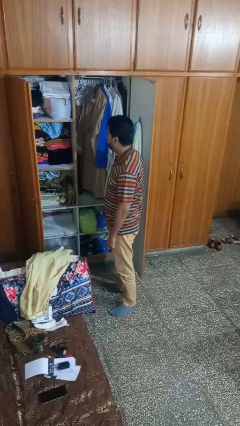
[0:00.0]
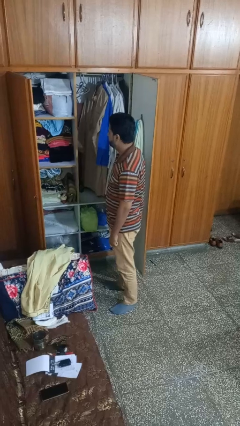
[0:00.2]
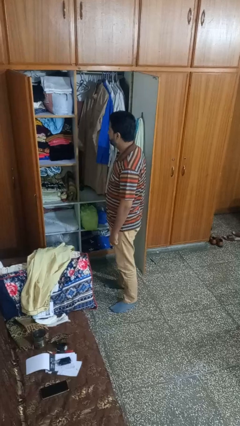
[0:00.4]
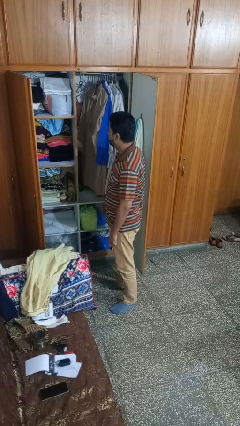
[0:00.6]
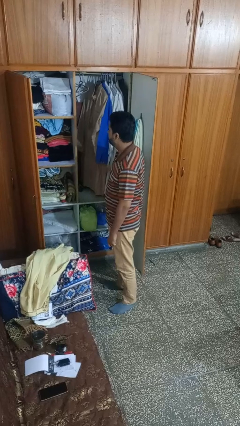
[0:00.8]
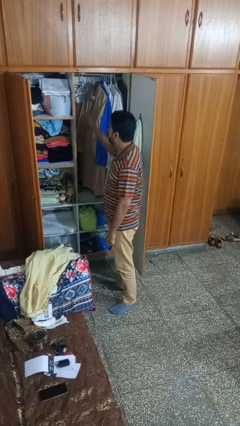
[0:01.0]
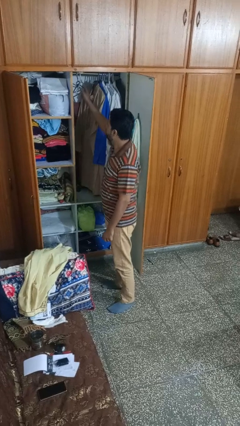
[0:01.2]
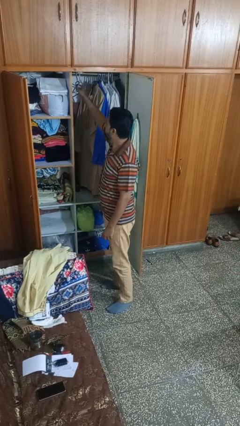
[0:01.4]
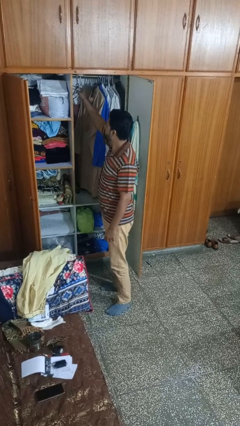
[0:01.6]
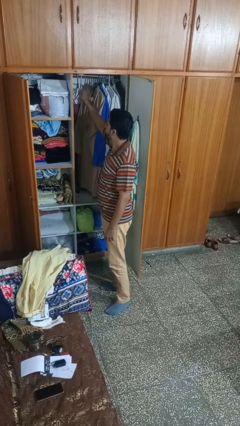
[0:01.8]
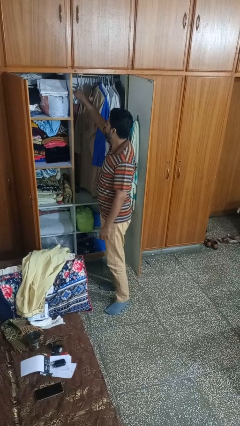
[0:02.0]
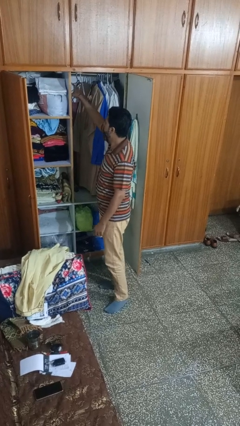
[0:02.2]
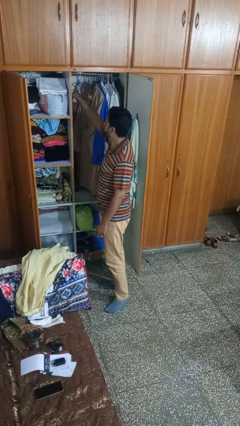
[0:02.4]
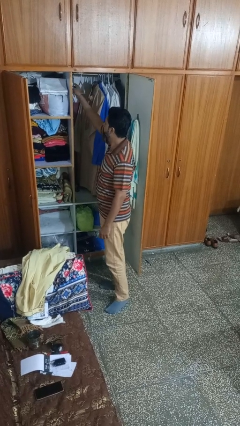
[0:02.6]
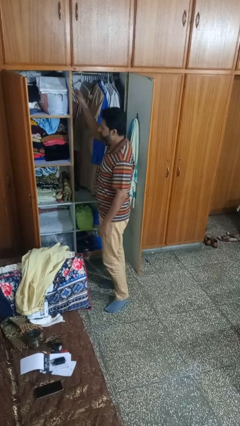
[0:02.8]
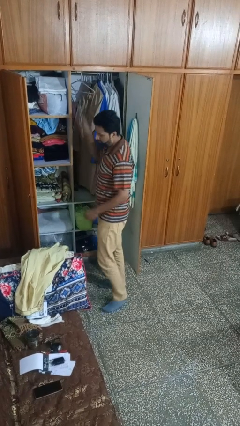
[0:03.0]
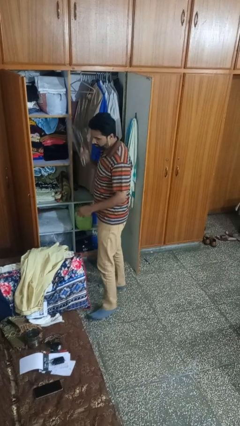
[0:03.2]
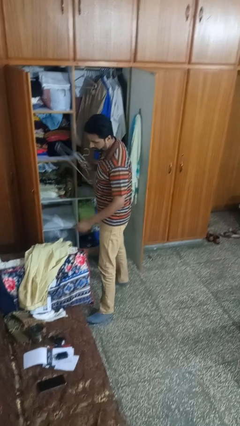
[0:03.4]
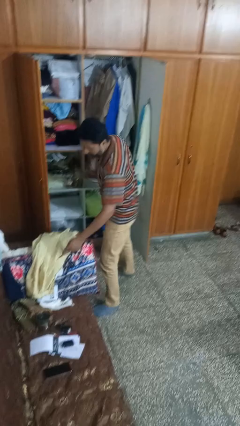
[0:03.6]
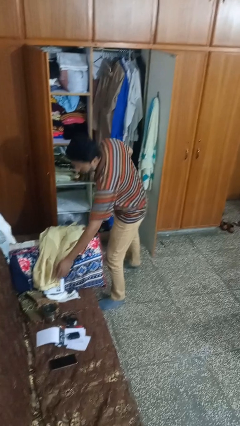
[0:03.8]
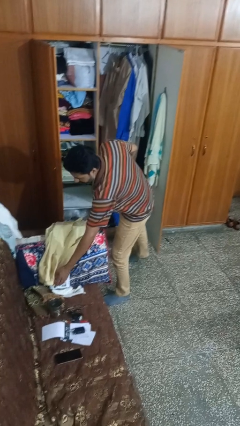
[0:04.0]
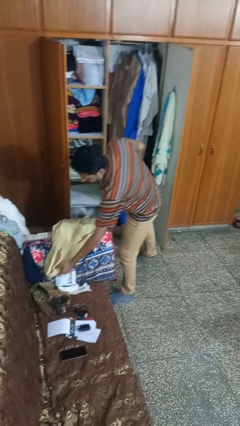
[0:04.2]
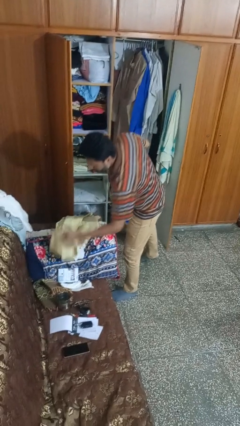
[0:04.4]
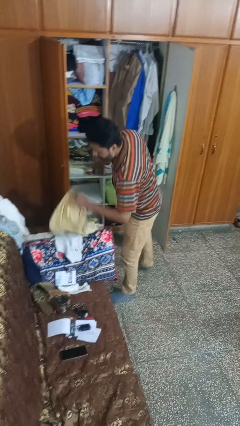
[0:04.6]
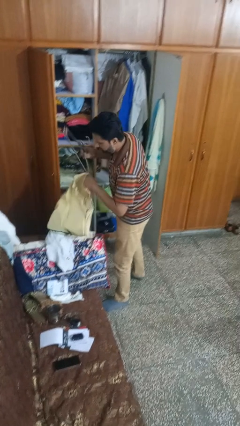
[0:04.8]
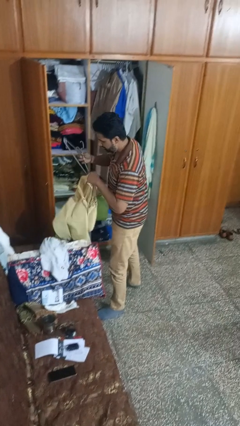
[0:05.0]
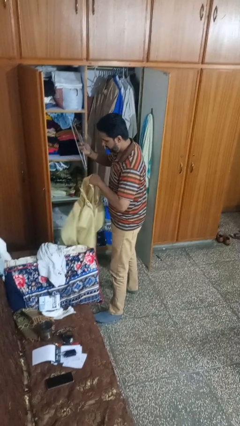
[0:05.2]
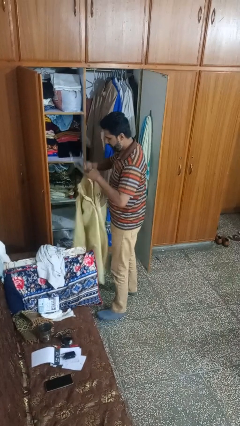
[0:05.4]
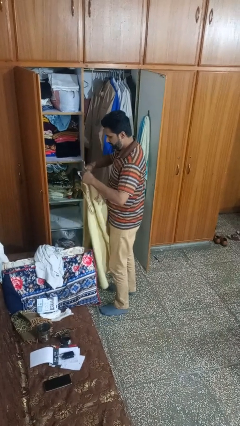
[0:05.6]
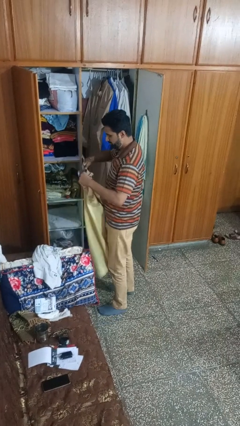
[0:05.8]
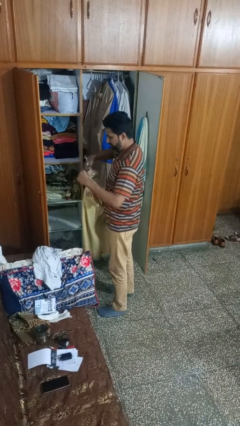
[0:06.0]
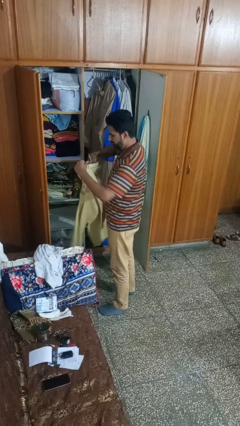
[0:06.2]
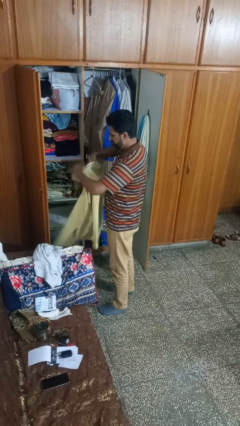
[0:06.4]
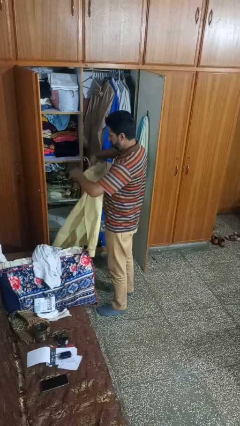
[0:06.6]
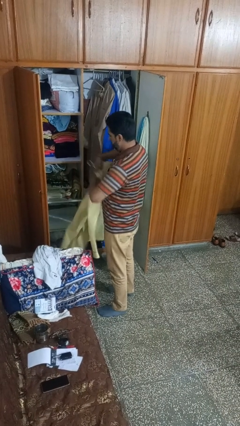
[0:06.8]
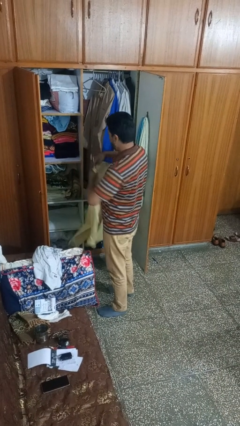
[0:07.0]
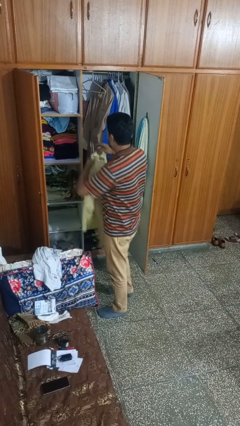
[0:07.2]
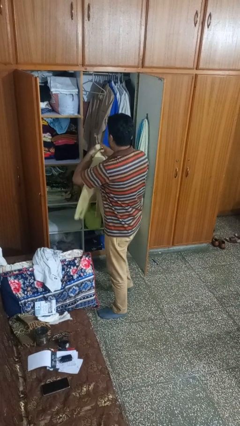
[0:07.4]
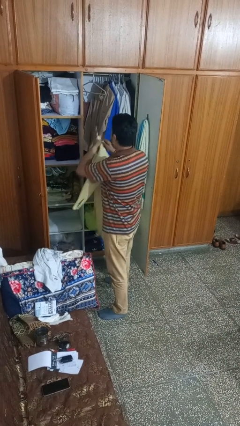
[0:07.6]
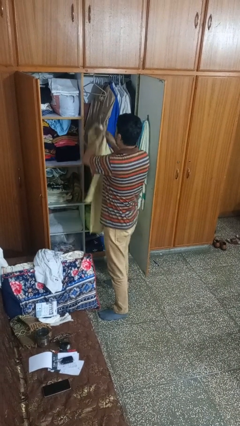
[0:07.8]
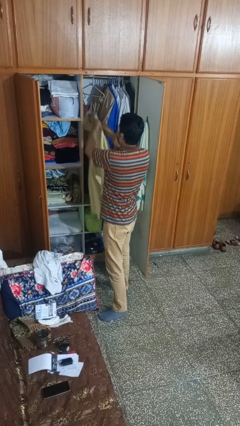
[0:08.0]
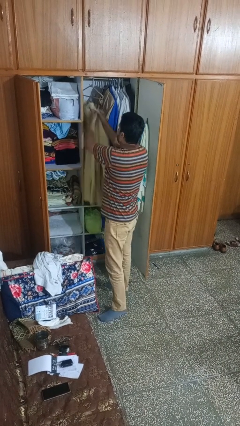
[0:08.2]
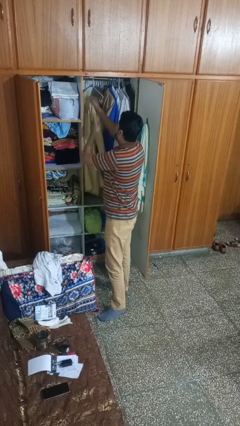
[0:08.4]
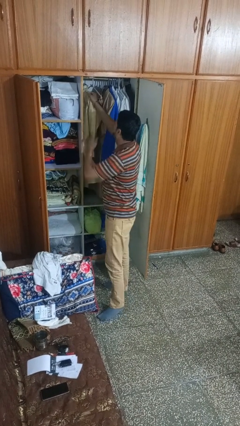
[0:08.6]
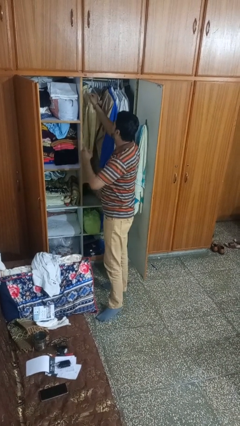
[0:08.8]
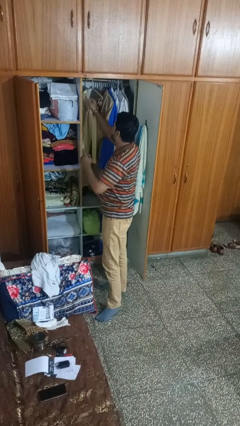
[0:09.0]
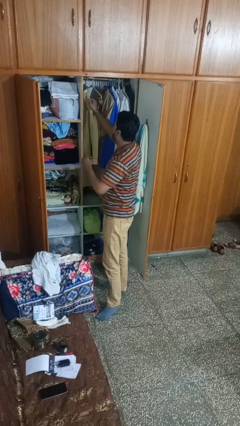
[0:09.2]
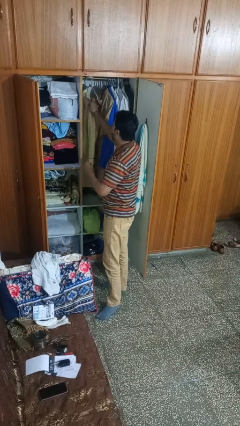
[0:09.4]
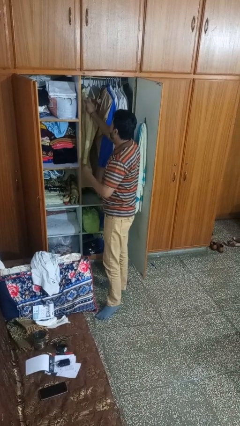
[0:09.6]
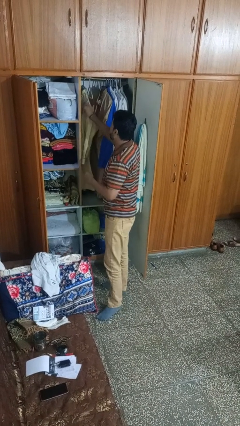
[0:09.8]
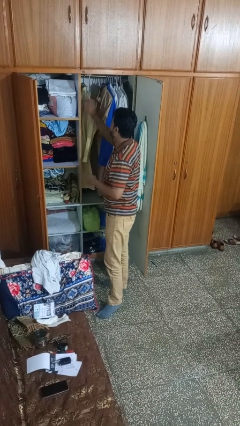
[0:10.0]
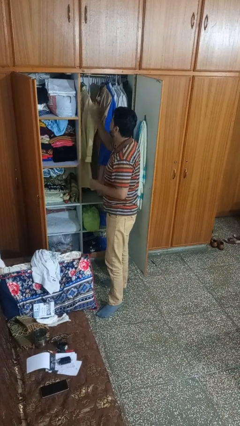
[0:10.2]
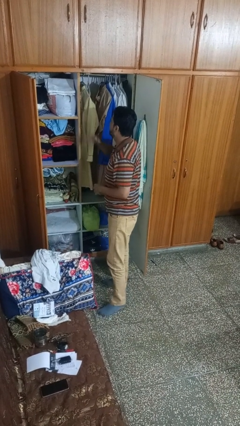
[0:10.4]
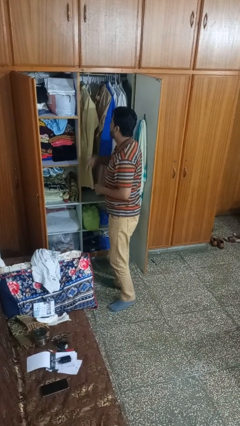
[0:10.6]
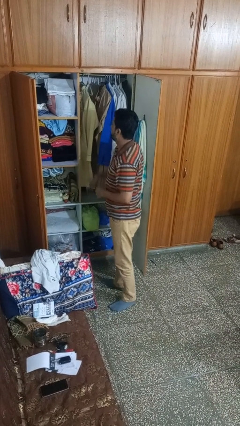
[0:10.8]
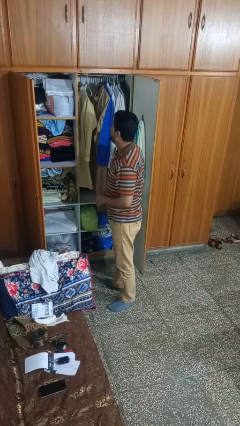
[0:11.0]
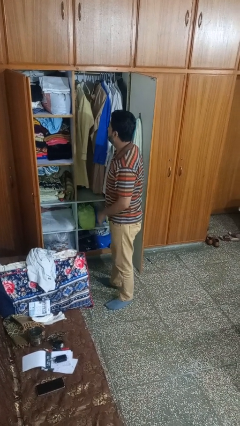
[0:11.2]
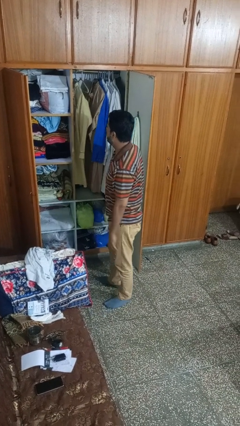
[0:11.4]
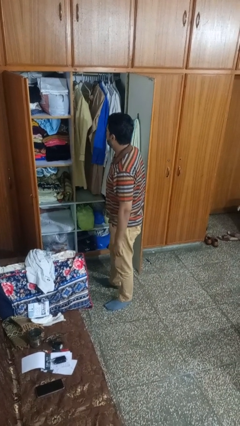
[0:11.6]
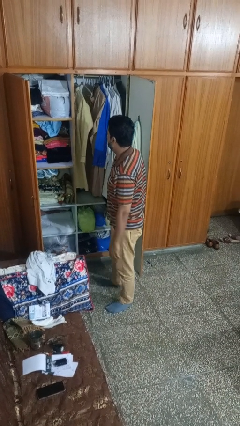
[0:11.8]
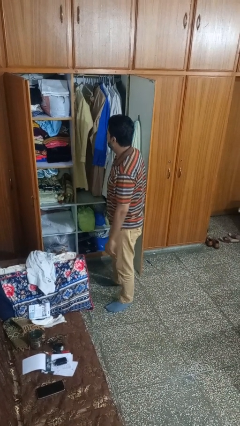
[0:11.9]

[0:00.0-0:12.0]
person puts clothes into closet

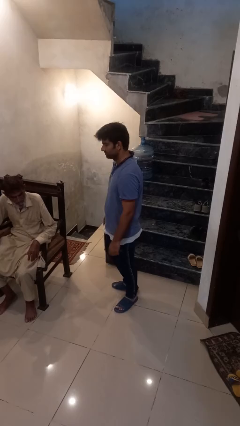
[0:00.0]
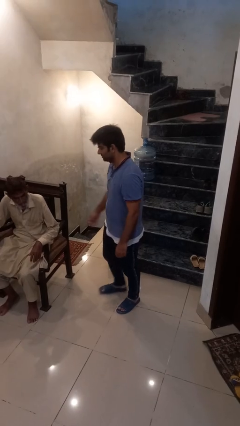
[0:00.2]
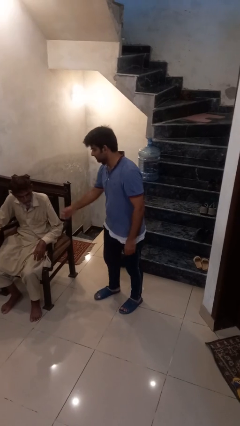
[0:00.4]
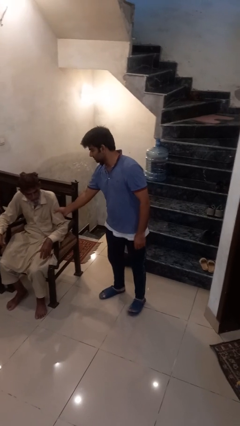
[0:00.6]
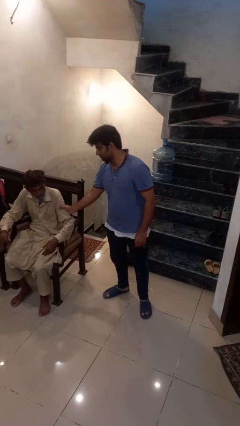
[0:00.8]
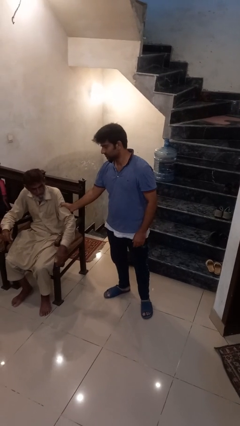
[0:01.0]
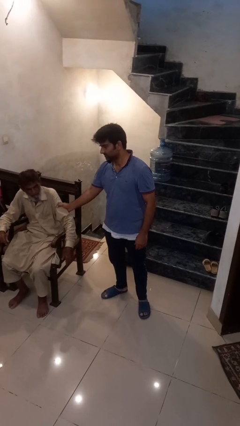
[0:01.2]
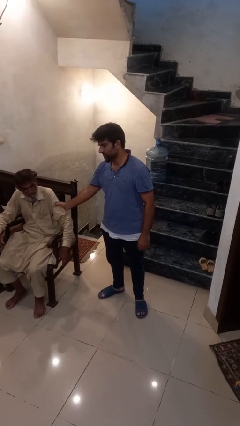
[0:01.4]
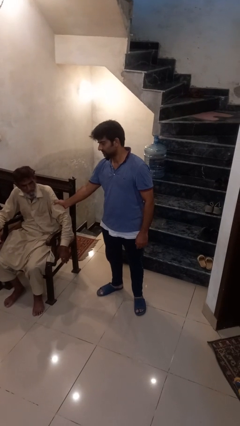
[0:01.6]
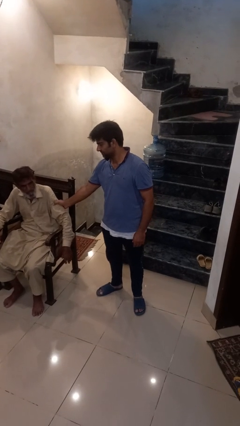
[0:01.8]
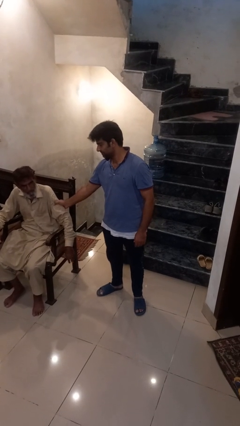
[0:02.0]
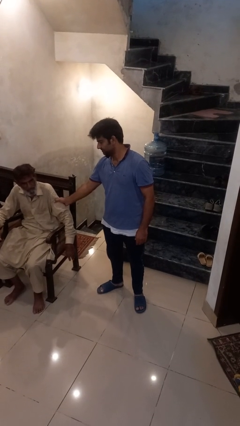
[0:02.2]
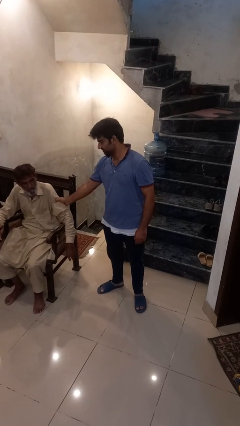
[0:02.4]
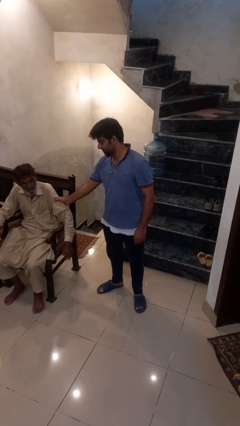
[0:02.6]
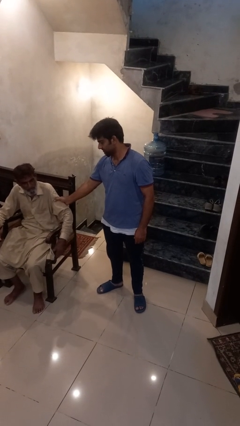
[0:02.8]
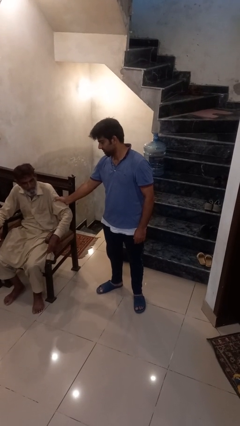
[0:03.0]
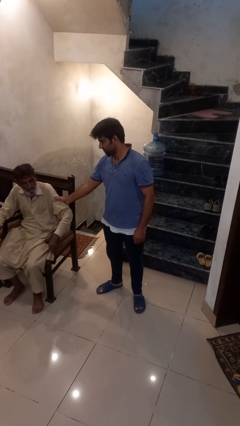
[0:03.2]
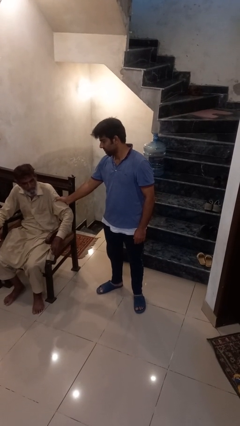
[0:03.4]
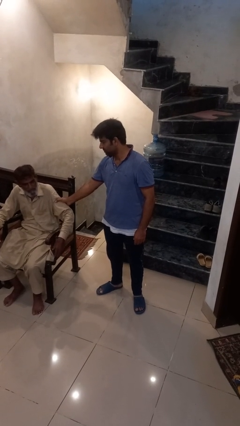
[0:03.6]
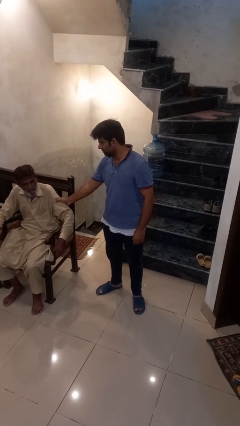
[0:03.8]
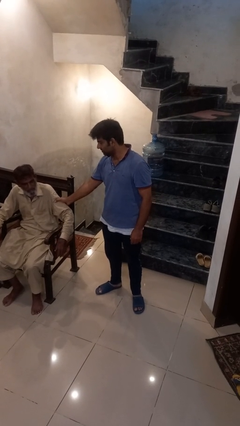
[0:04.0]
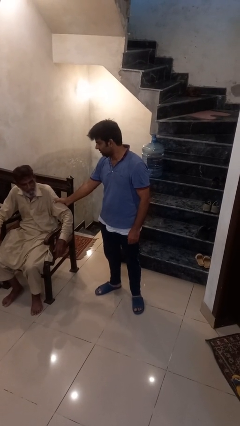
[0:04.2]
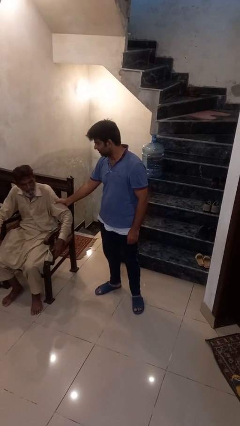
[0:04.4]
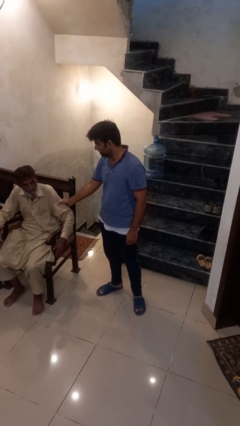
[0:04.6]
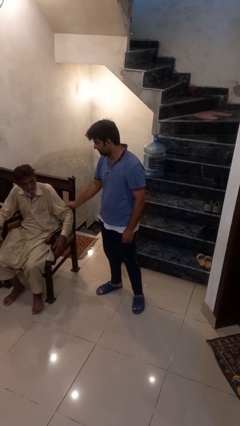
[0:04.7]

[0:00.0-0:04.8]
person grabs person by bicep

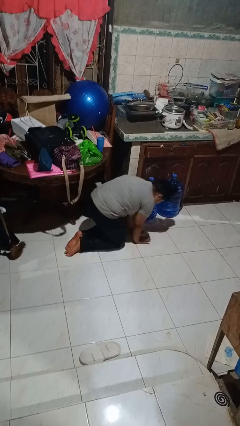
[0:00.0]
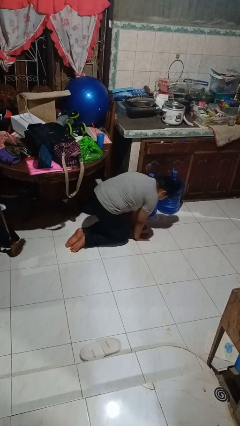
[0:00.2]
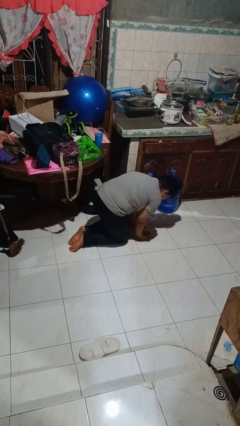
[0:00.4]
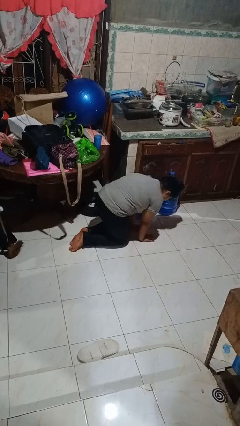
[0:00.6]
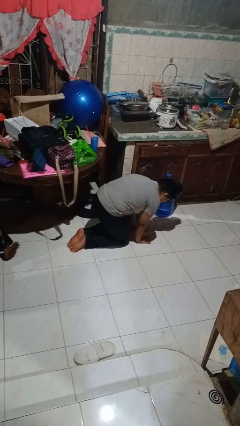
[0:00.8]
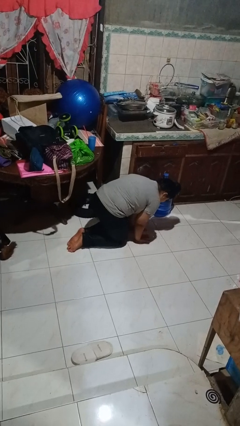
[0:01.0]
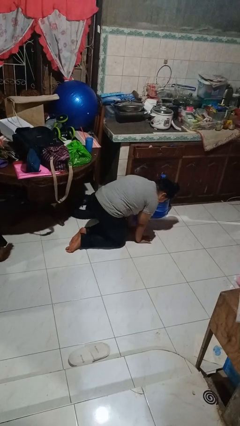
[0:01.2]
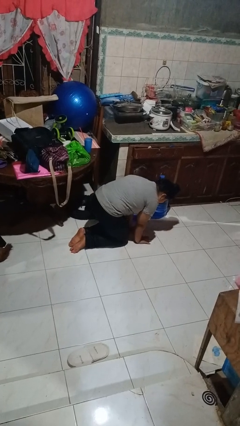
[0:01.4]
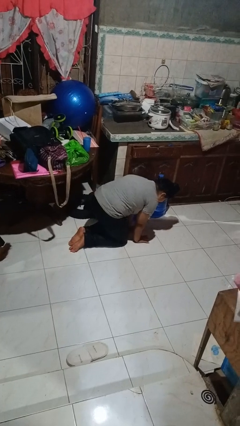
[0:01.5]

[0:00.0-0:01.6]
person crawls
